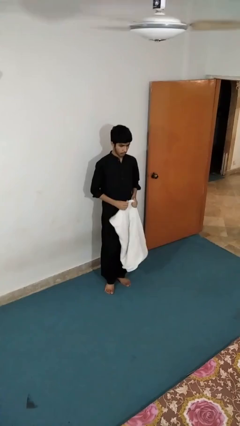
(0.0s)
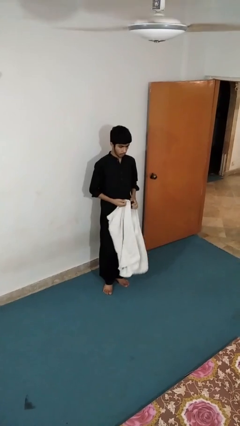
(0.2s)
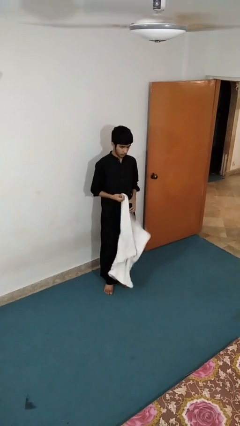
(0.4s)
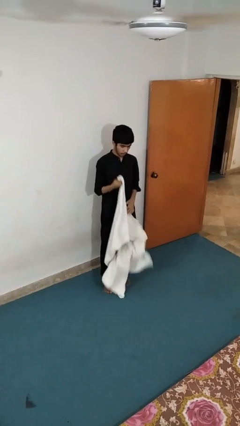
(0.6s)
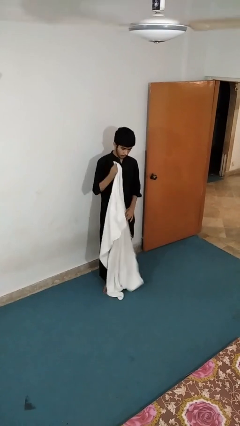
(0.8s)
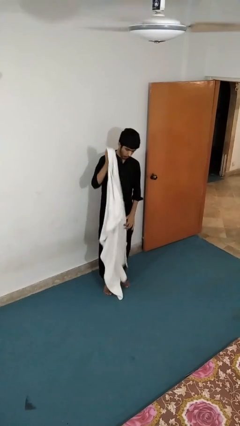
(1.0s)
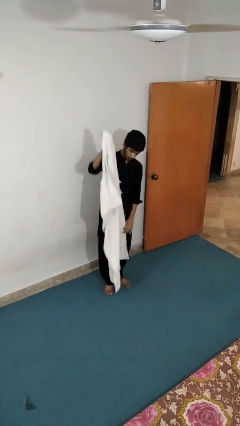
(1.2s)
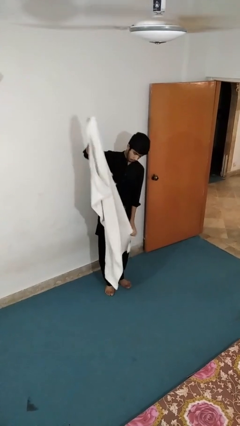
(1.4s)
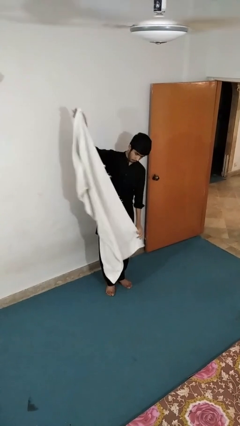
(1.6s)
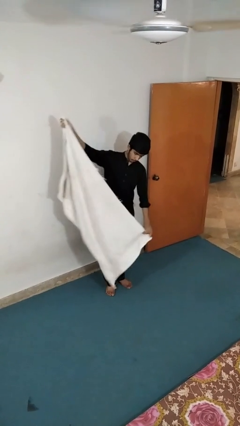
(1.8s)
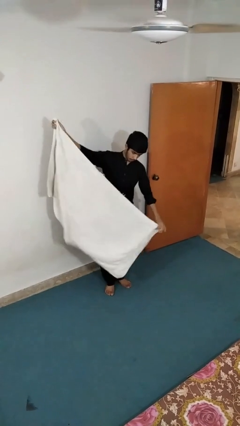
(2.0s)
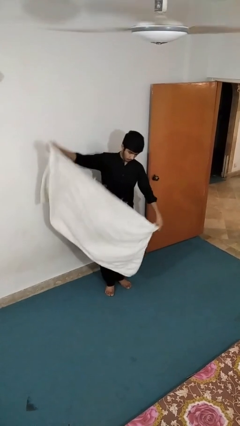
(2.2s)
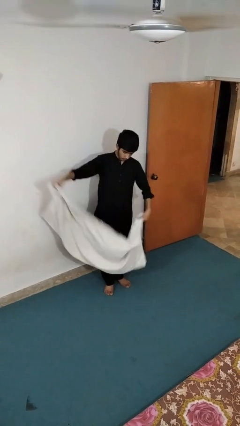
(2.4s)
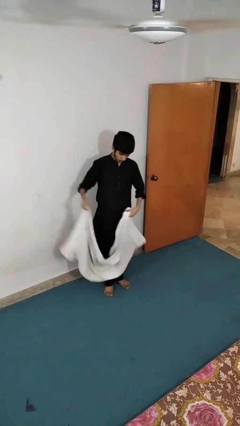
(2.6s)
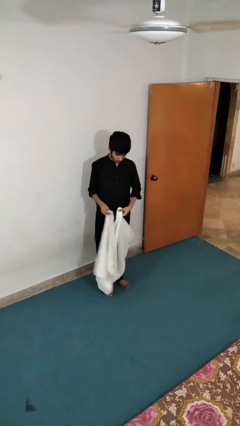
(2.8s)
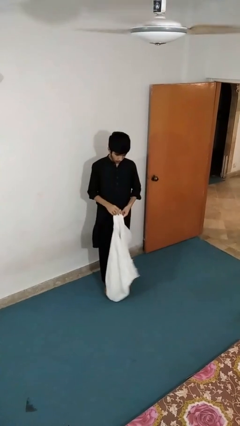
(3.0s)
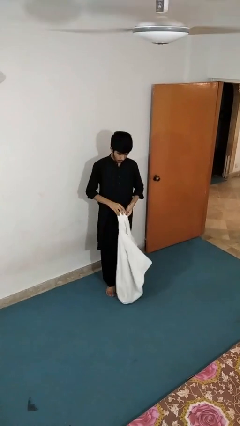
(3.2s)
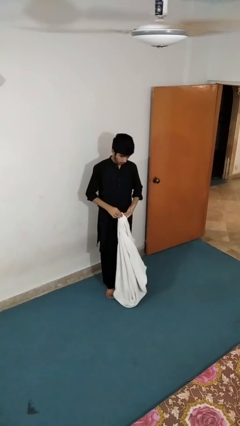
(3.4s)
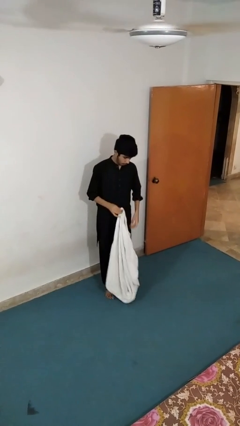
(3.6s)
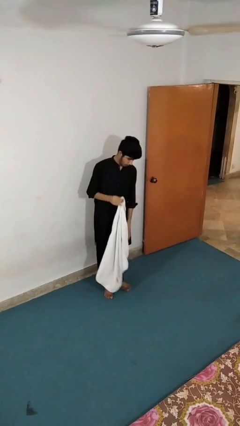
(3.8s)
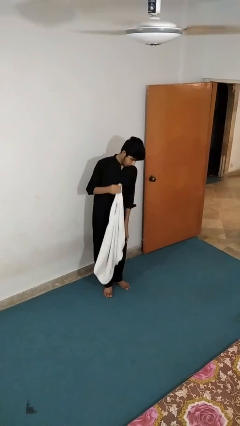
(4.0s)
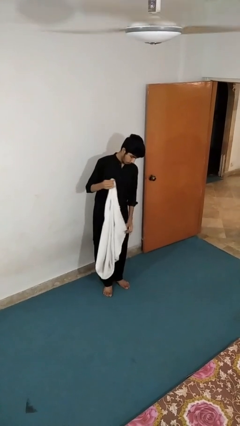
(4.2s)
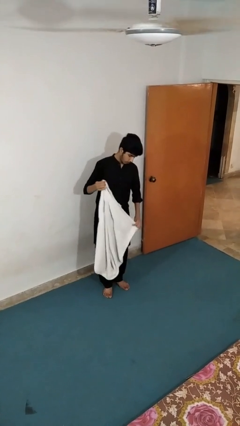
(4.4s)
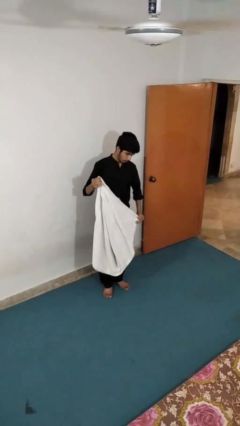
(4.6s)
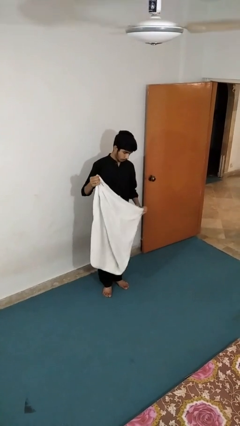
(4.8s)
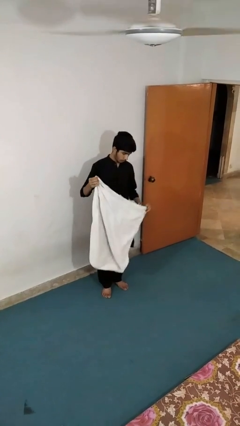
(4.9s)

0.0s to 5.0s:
person folds towel

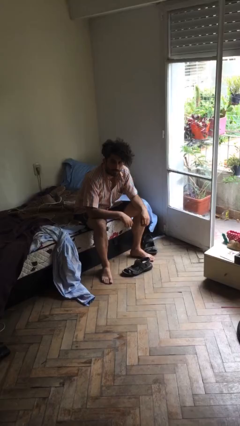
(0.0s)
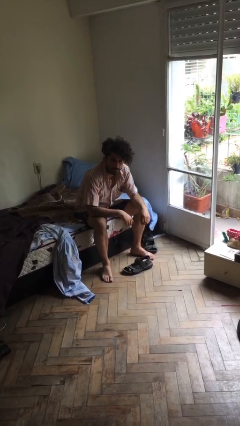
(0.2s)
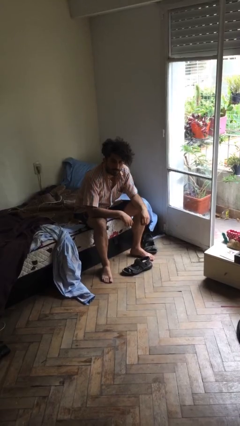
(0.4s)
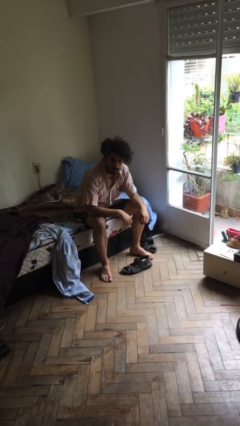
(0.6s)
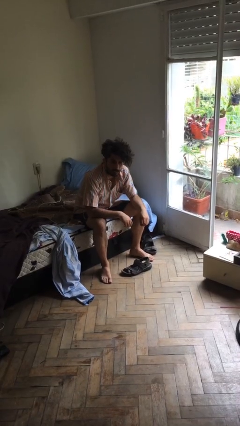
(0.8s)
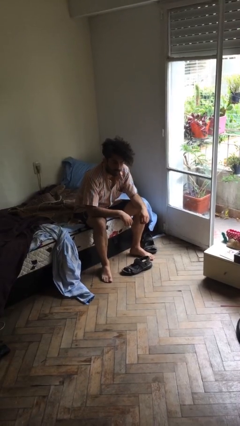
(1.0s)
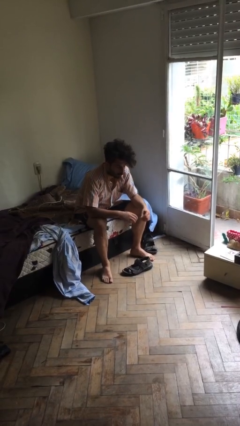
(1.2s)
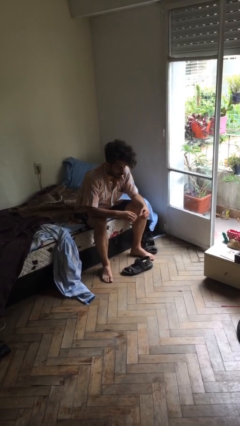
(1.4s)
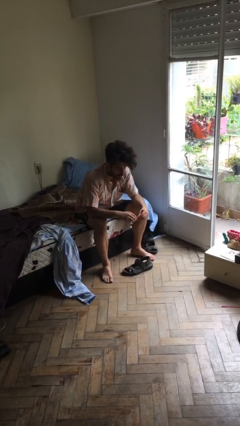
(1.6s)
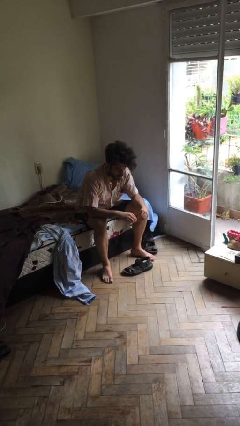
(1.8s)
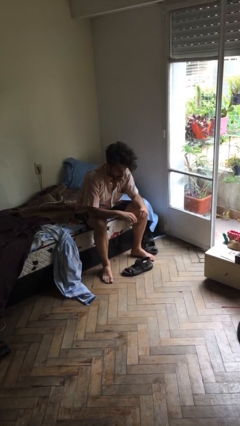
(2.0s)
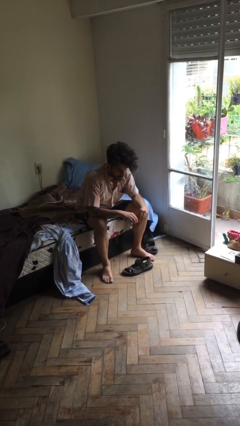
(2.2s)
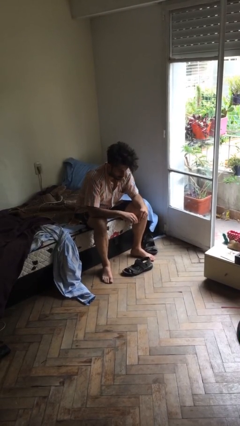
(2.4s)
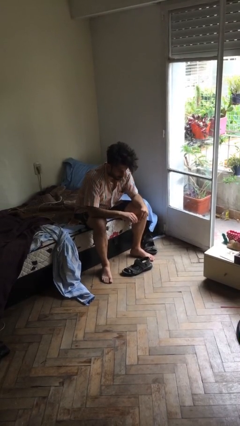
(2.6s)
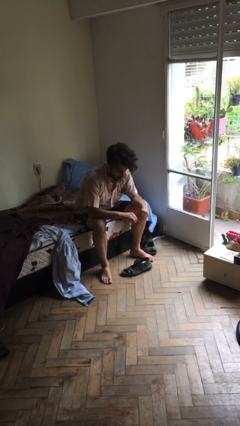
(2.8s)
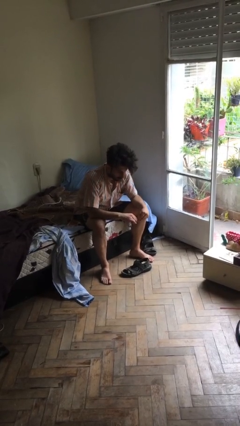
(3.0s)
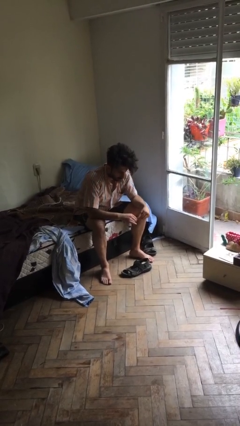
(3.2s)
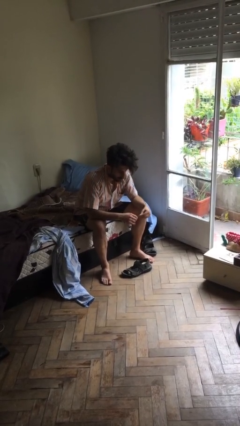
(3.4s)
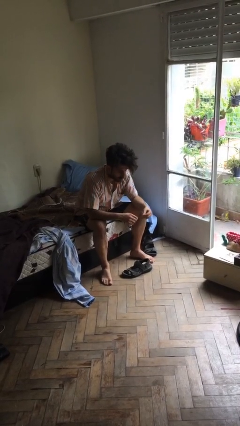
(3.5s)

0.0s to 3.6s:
person clips fingernails

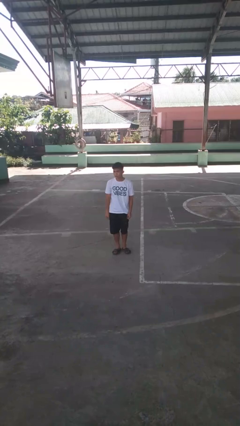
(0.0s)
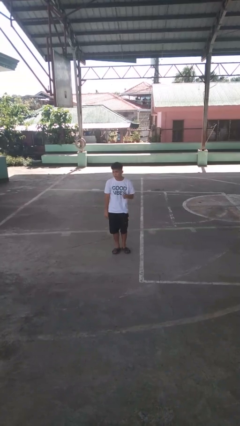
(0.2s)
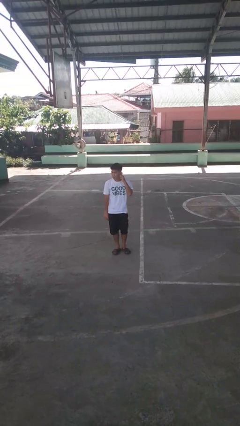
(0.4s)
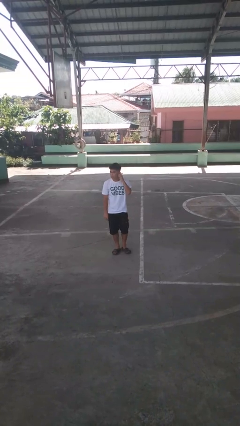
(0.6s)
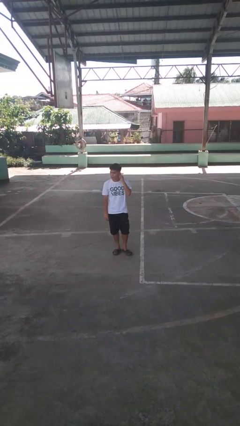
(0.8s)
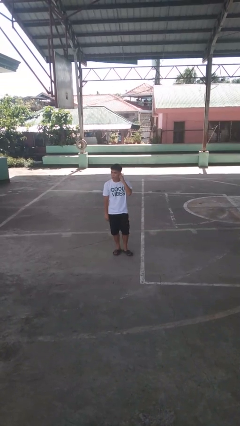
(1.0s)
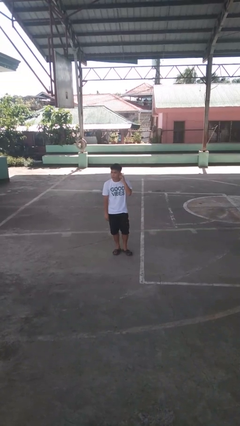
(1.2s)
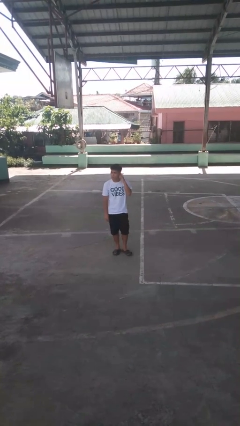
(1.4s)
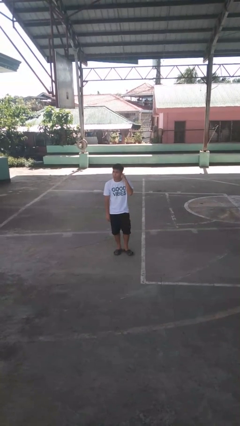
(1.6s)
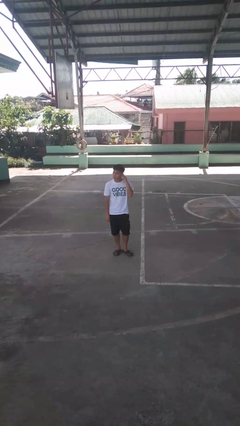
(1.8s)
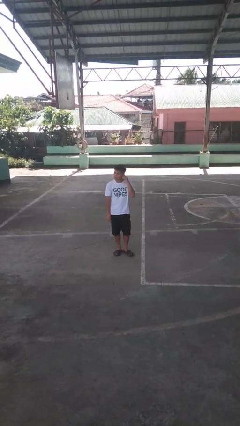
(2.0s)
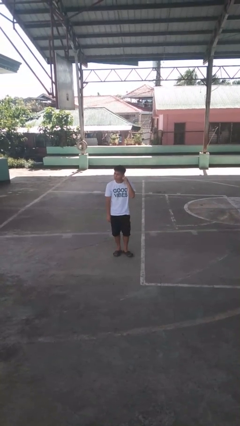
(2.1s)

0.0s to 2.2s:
person touches earlobe

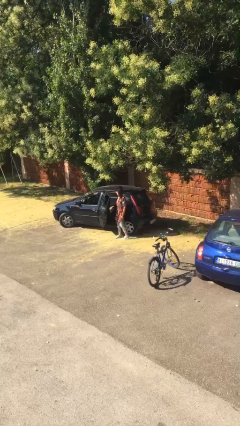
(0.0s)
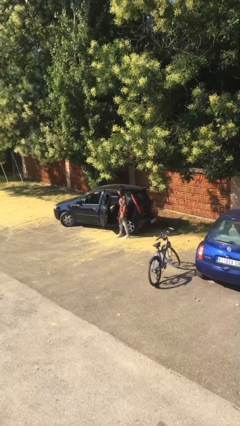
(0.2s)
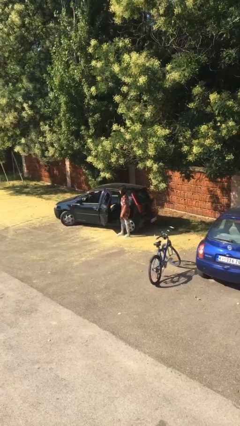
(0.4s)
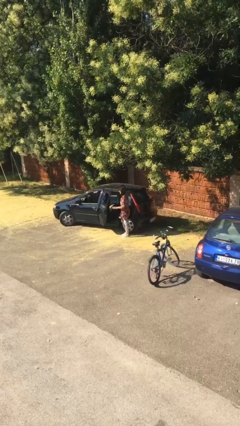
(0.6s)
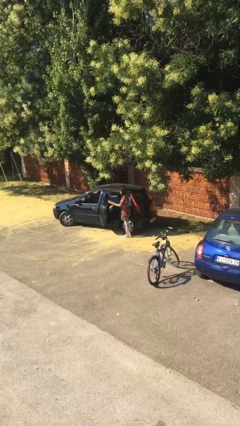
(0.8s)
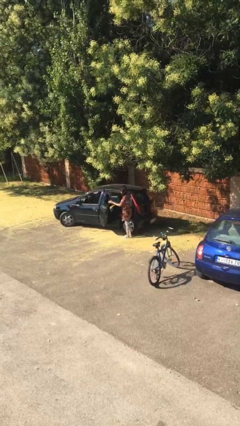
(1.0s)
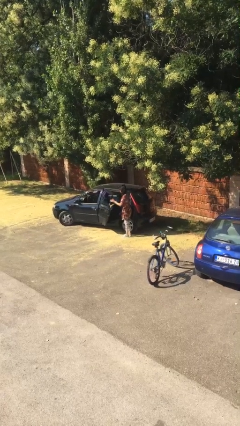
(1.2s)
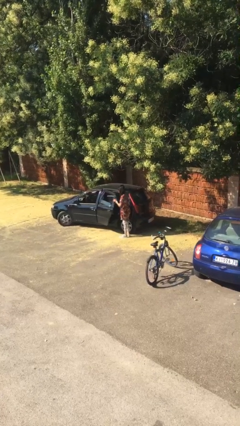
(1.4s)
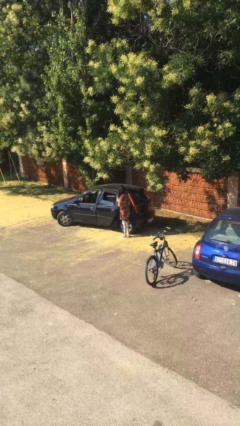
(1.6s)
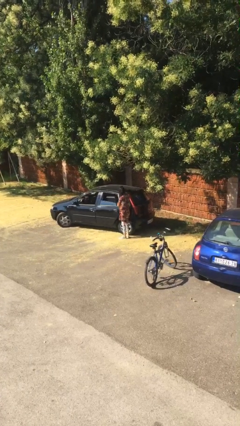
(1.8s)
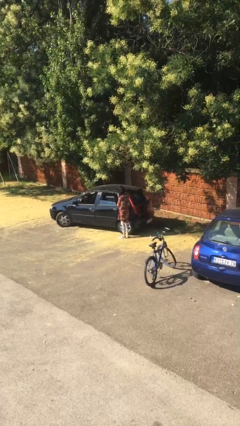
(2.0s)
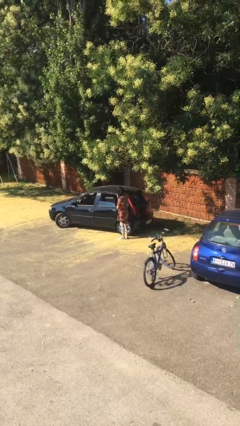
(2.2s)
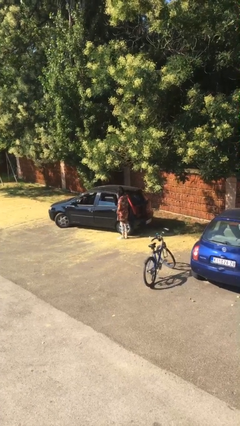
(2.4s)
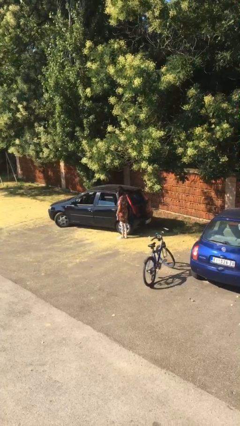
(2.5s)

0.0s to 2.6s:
person closes car door

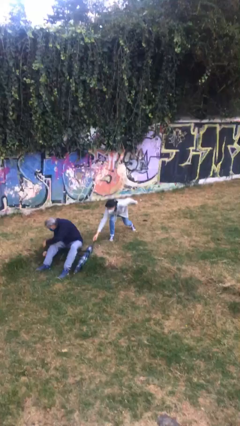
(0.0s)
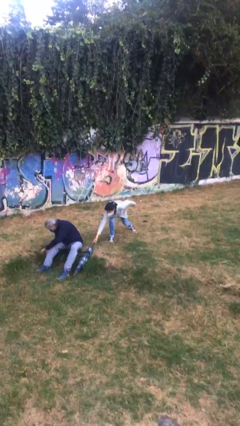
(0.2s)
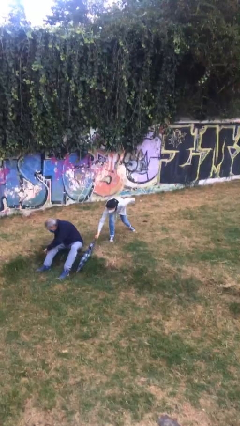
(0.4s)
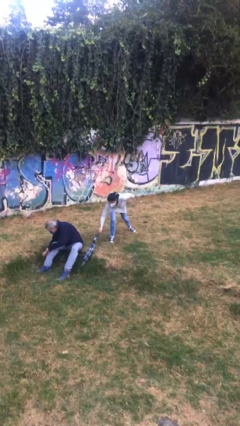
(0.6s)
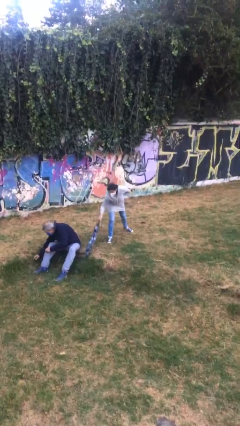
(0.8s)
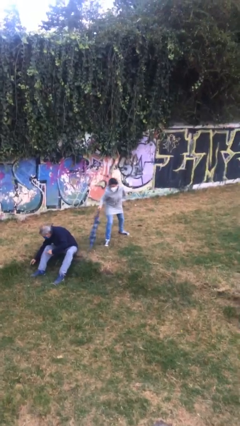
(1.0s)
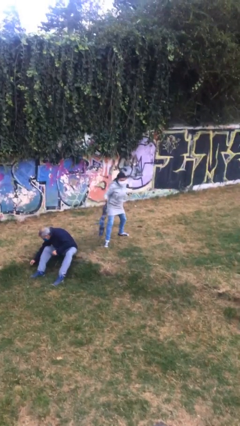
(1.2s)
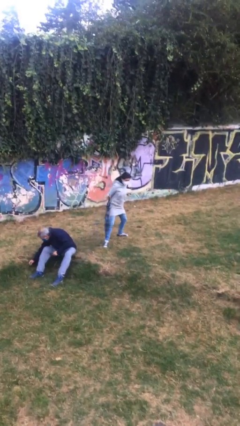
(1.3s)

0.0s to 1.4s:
person steals object from person

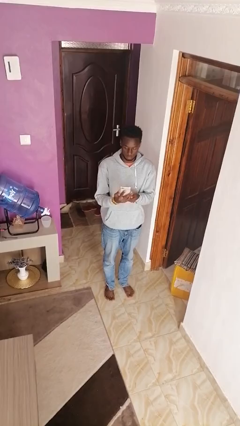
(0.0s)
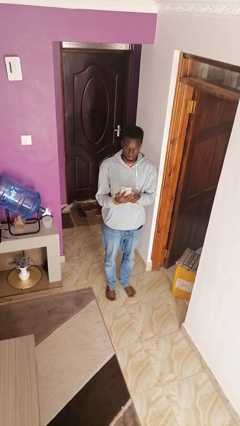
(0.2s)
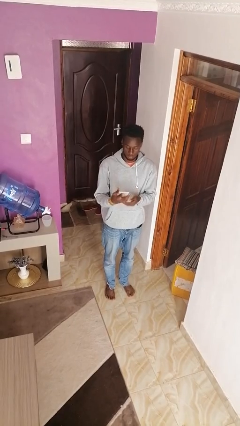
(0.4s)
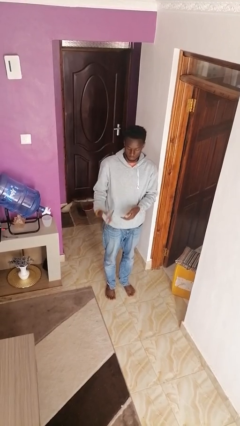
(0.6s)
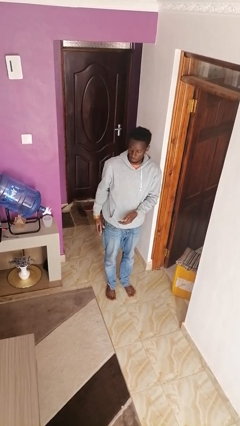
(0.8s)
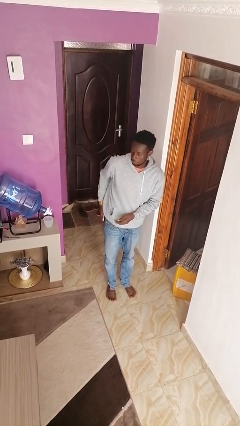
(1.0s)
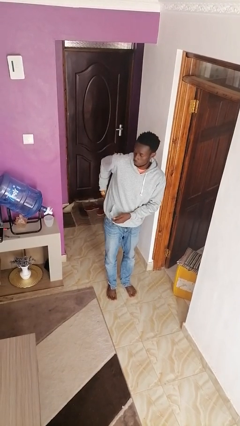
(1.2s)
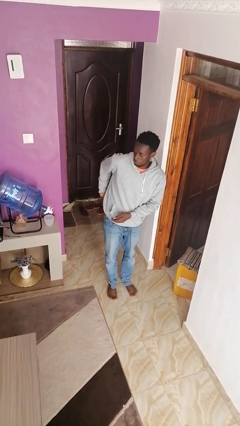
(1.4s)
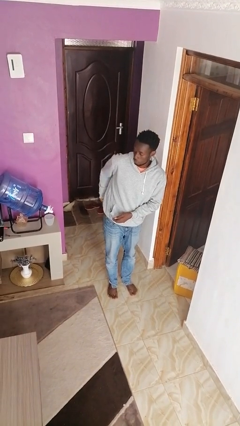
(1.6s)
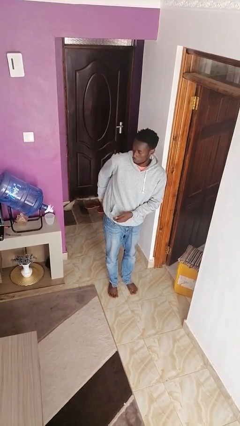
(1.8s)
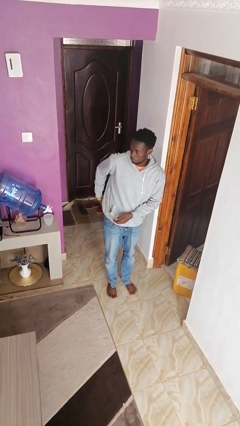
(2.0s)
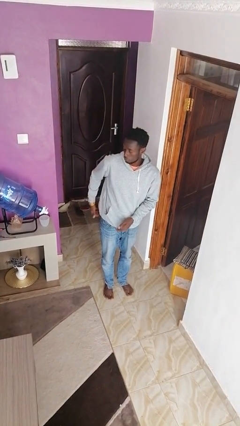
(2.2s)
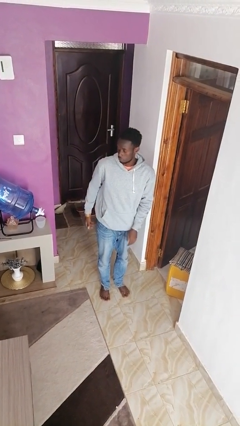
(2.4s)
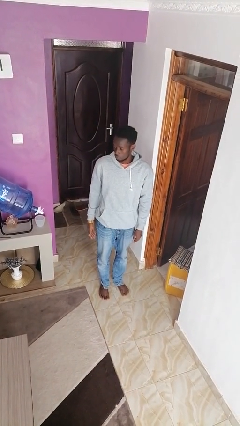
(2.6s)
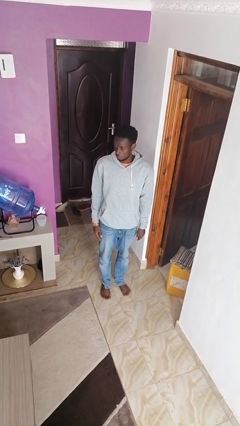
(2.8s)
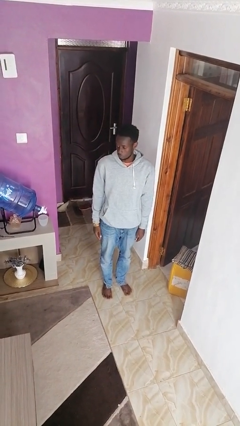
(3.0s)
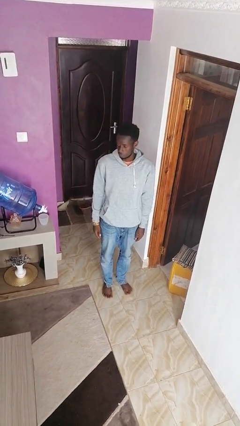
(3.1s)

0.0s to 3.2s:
person puts phone into pocket
